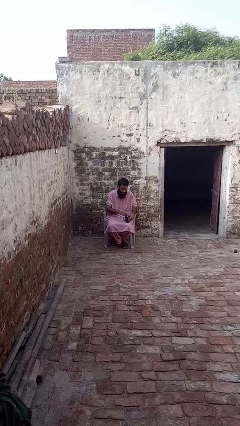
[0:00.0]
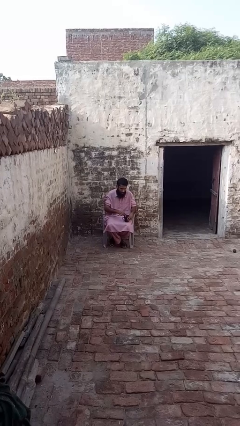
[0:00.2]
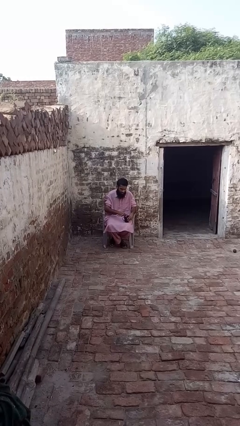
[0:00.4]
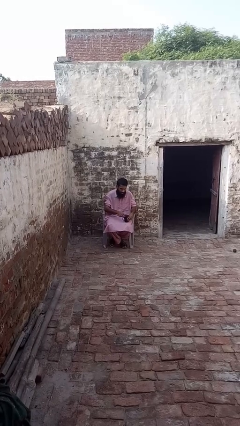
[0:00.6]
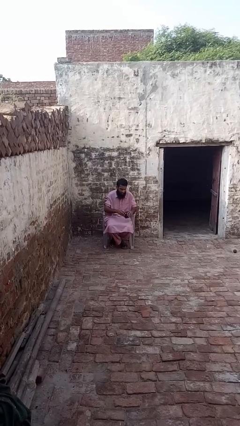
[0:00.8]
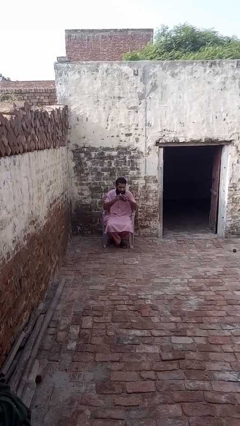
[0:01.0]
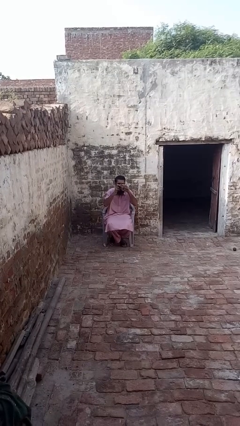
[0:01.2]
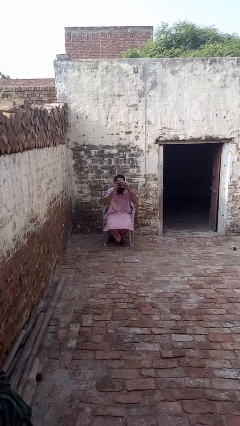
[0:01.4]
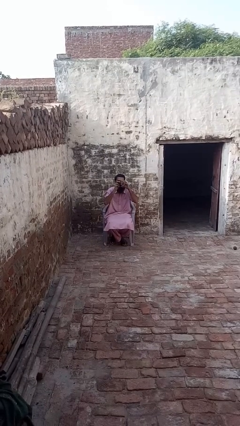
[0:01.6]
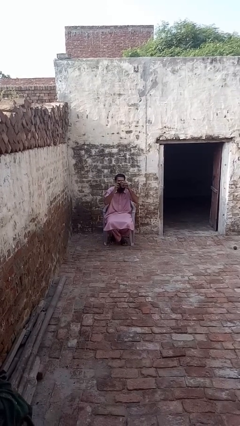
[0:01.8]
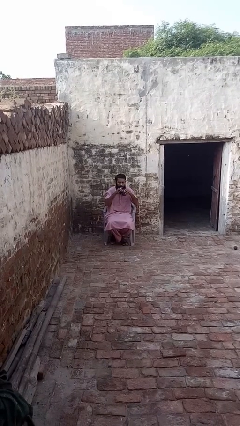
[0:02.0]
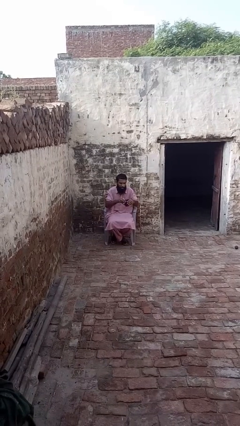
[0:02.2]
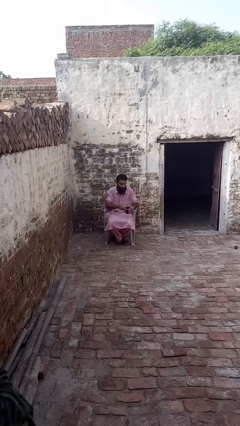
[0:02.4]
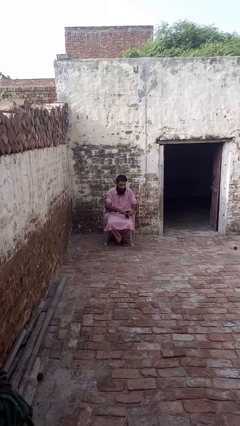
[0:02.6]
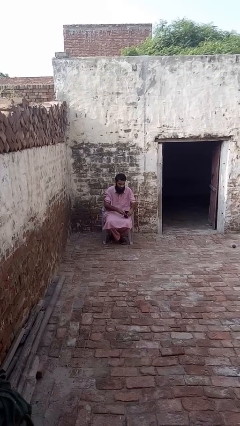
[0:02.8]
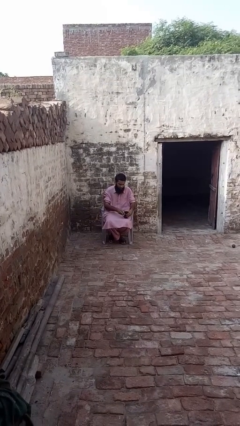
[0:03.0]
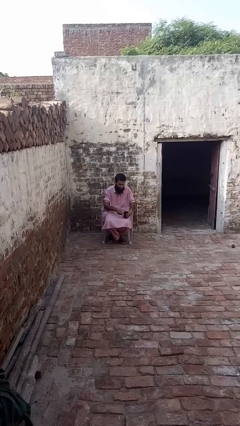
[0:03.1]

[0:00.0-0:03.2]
person drinks from mug

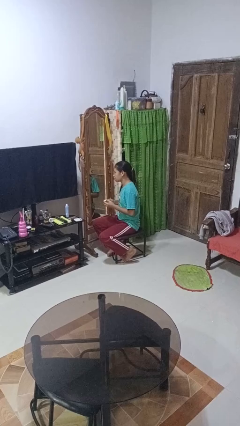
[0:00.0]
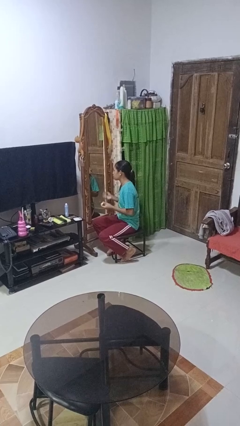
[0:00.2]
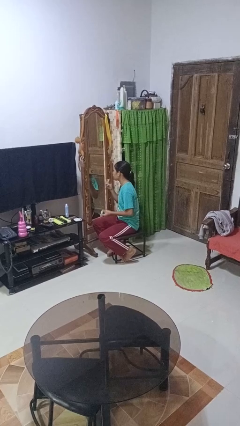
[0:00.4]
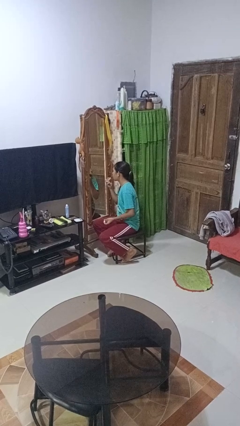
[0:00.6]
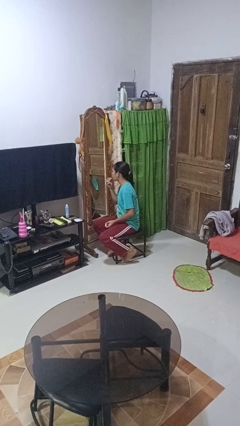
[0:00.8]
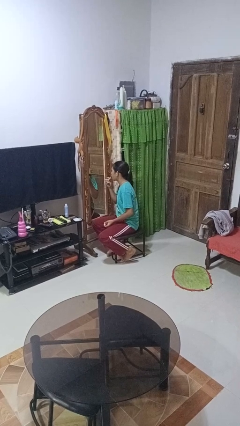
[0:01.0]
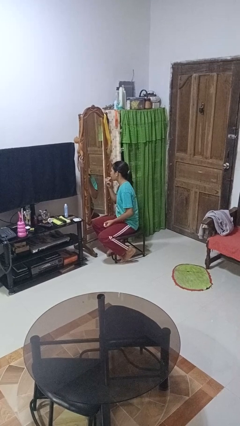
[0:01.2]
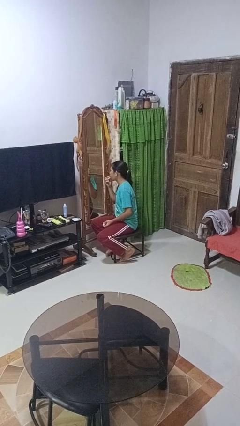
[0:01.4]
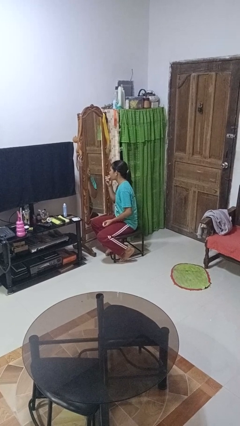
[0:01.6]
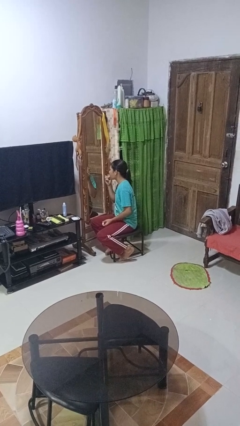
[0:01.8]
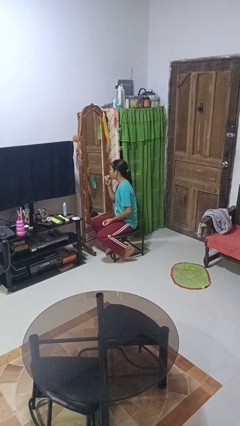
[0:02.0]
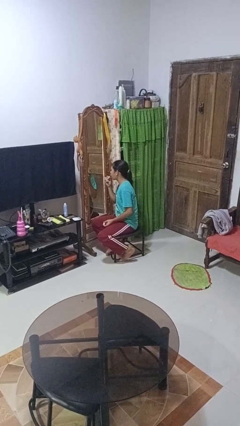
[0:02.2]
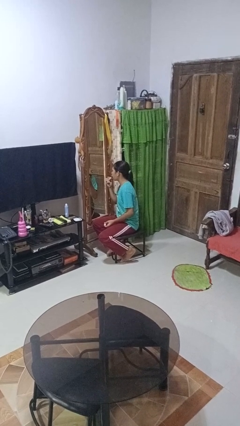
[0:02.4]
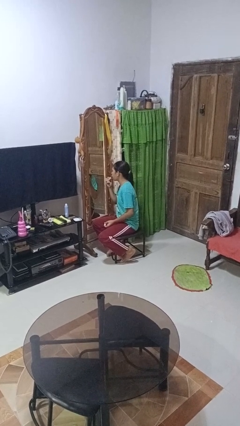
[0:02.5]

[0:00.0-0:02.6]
person applies lip makeup

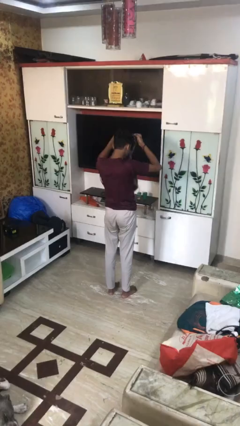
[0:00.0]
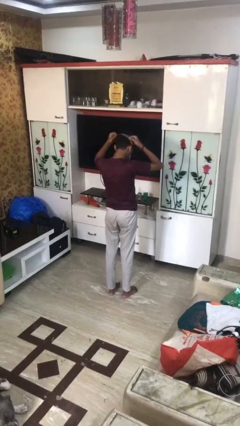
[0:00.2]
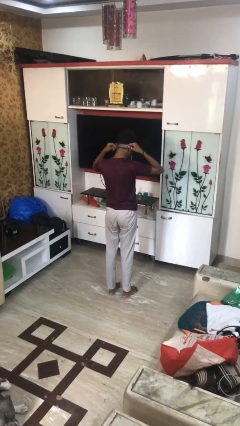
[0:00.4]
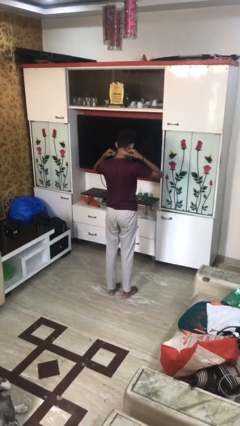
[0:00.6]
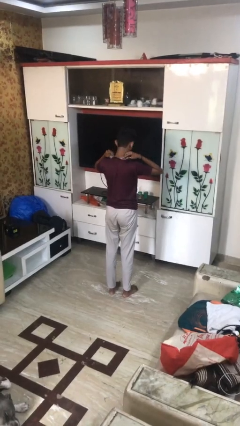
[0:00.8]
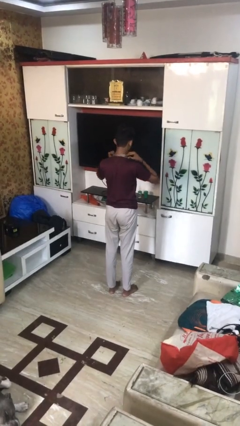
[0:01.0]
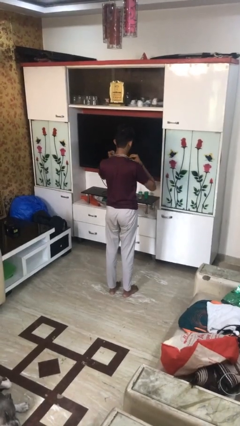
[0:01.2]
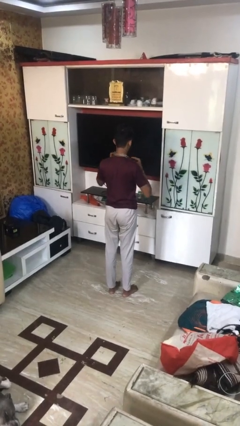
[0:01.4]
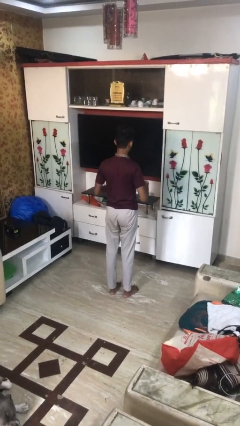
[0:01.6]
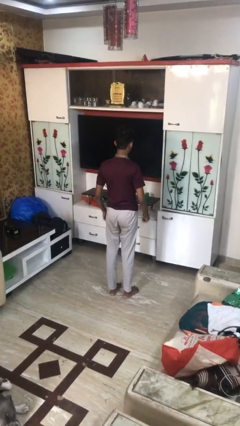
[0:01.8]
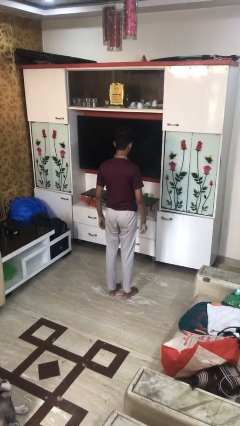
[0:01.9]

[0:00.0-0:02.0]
person puts on necktie

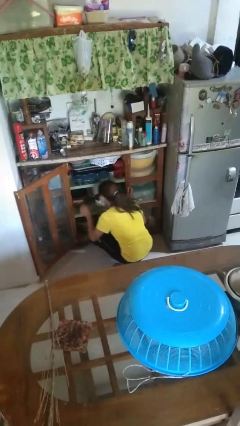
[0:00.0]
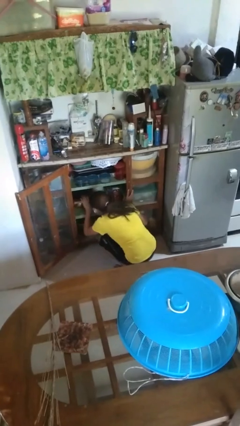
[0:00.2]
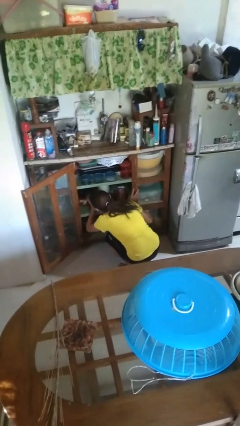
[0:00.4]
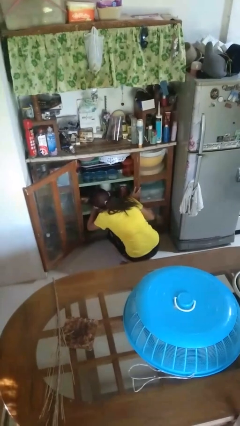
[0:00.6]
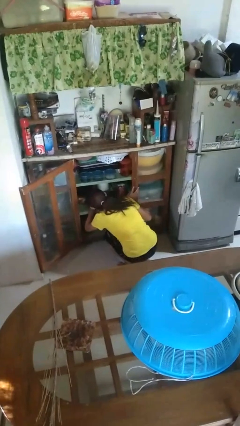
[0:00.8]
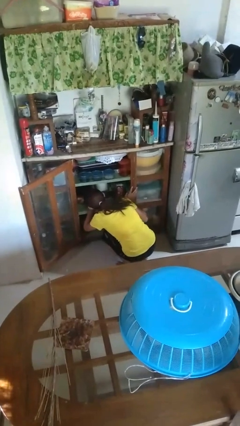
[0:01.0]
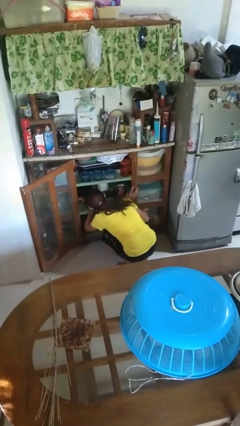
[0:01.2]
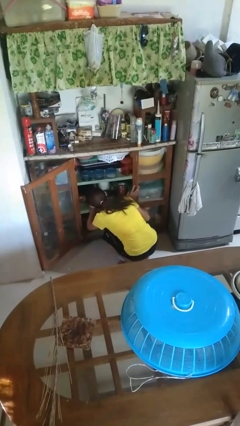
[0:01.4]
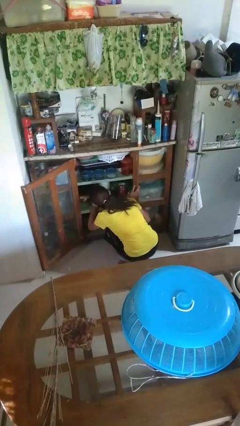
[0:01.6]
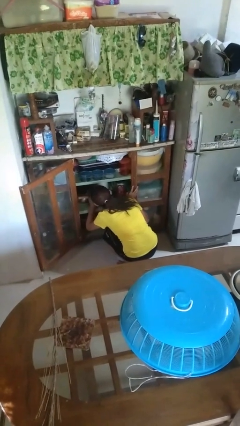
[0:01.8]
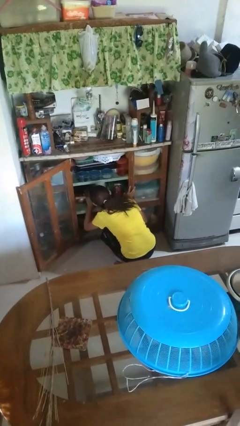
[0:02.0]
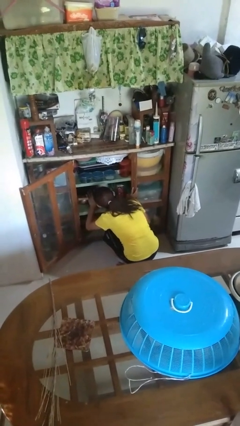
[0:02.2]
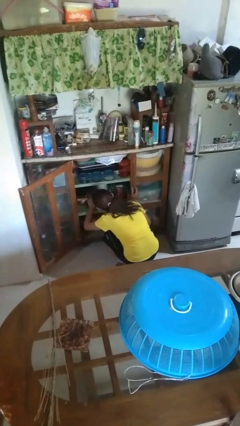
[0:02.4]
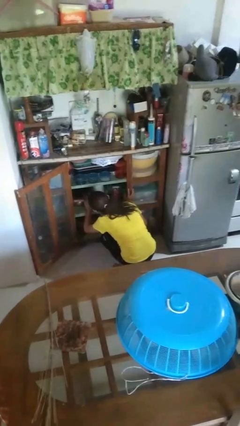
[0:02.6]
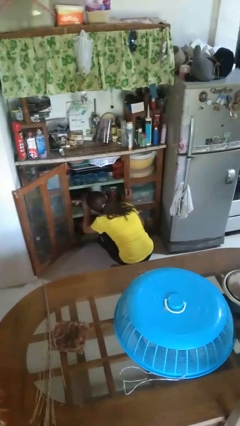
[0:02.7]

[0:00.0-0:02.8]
person searches in cabinet

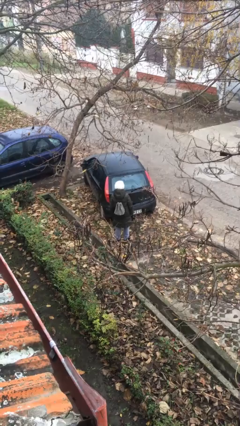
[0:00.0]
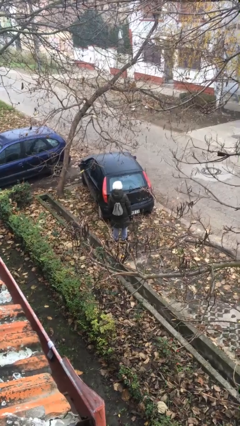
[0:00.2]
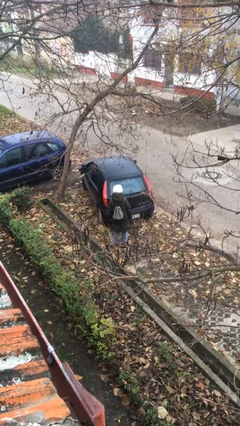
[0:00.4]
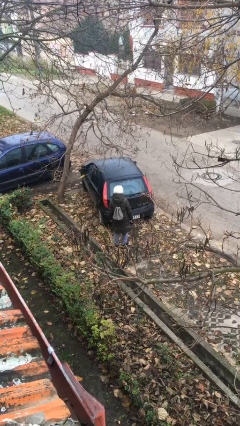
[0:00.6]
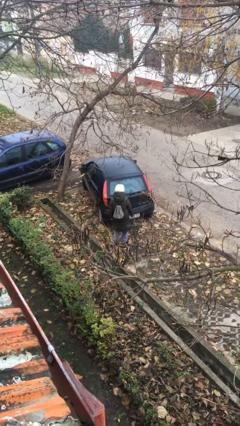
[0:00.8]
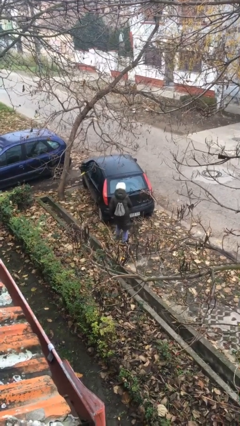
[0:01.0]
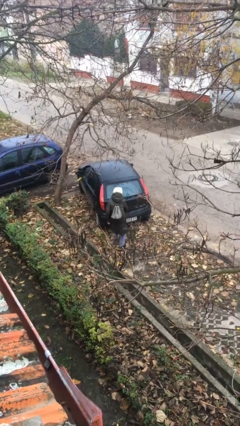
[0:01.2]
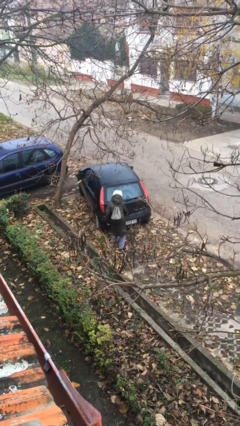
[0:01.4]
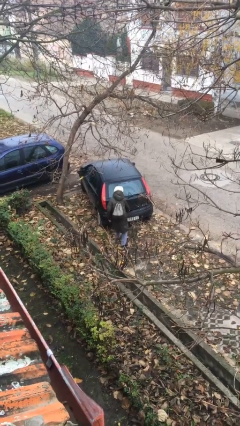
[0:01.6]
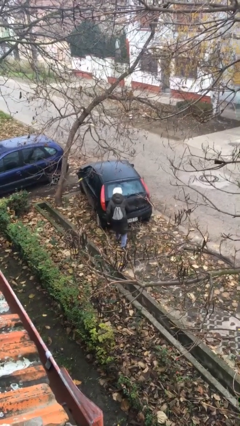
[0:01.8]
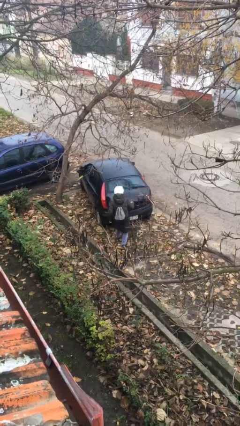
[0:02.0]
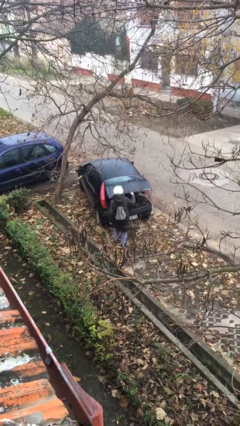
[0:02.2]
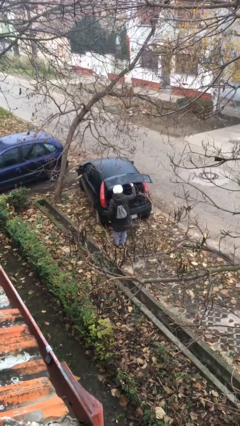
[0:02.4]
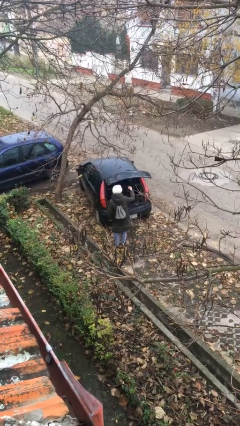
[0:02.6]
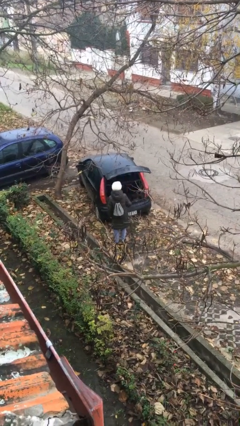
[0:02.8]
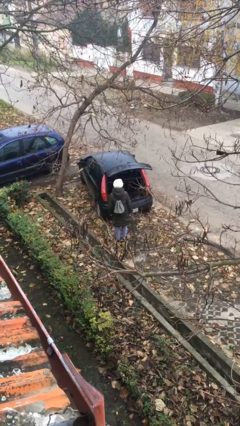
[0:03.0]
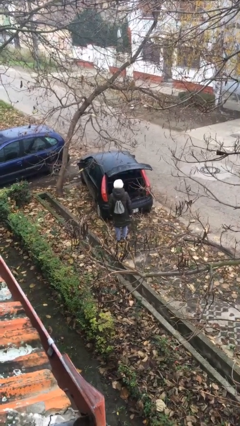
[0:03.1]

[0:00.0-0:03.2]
person opens car trunk

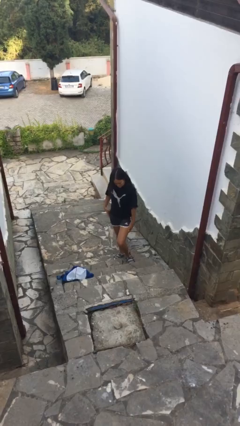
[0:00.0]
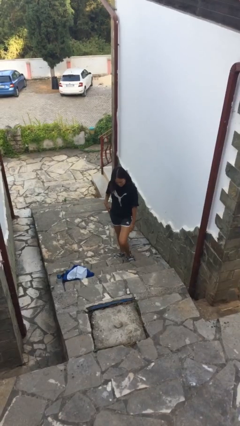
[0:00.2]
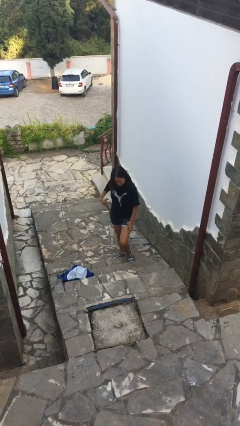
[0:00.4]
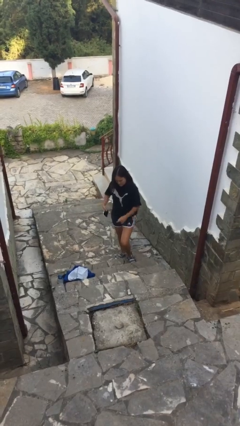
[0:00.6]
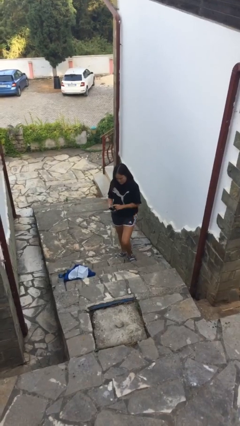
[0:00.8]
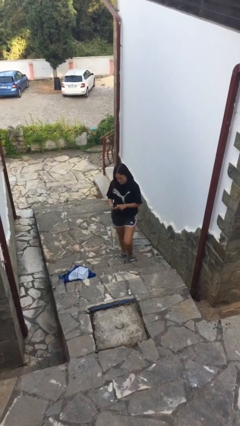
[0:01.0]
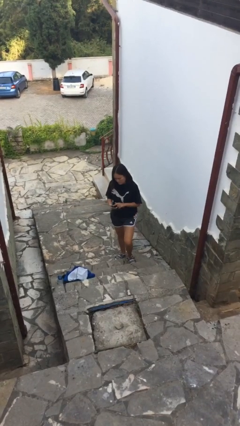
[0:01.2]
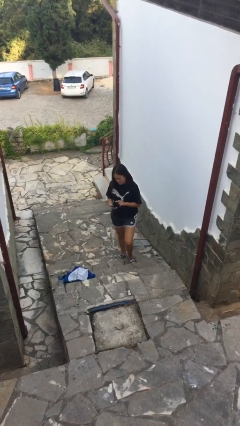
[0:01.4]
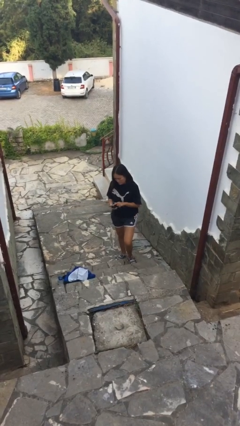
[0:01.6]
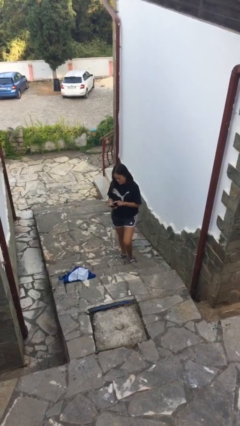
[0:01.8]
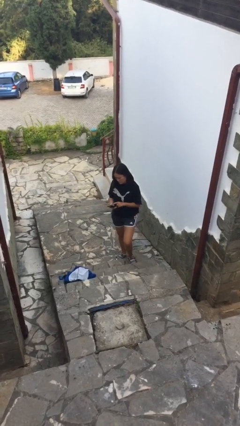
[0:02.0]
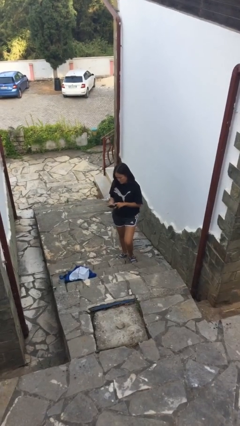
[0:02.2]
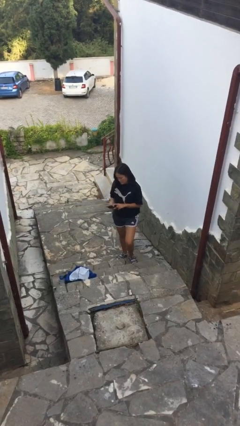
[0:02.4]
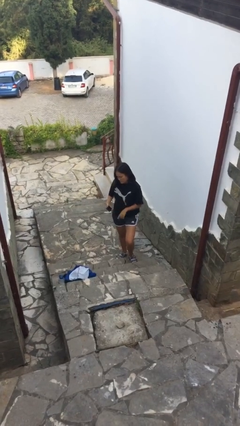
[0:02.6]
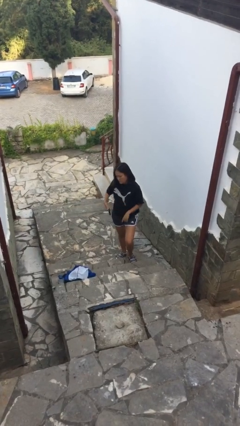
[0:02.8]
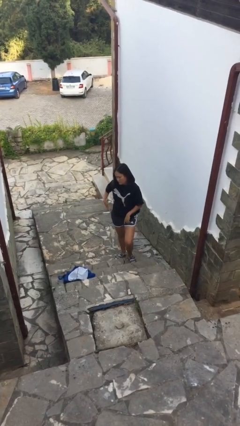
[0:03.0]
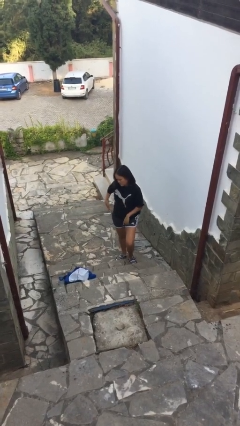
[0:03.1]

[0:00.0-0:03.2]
person takes phone from pocket

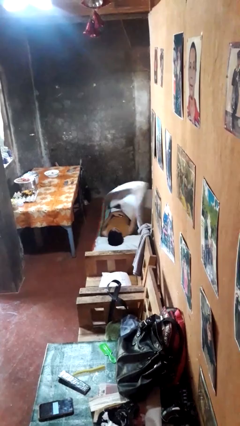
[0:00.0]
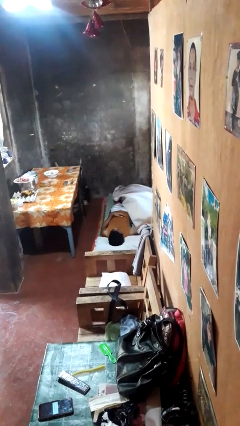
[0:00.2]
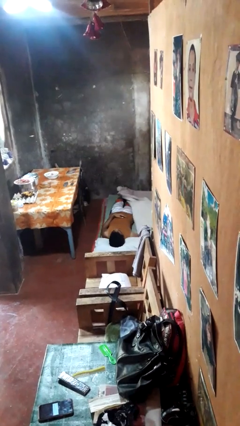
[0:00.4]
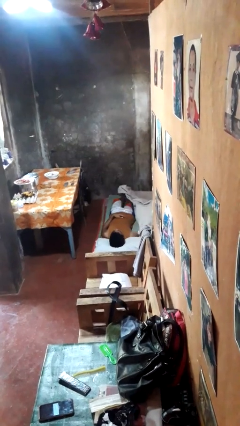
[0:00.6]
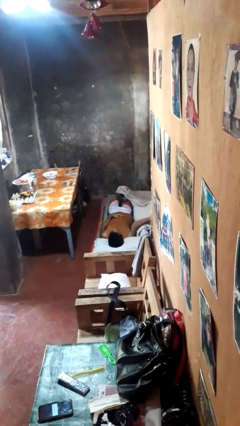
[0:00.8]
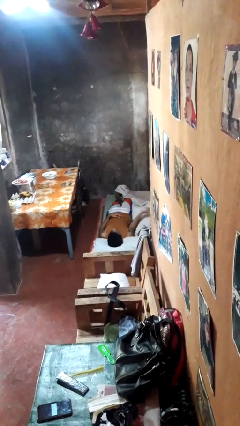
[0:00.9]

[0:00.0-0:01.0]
person uncovers with bedsheets
